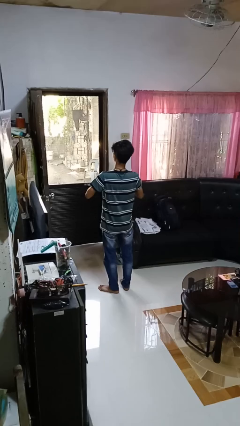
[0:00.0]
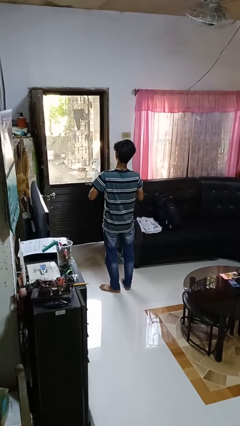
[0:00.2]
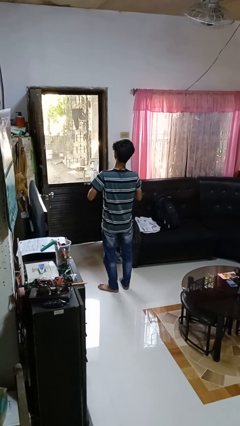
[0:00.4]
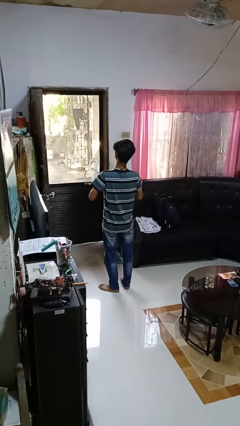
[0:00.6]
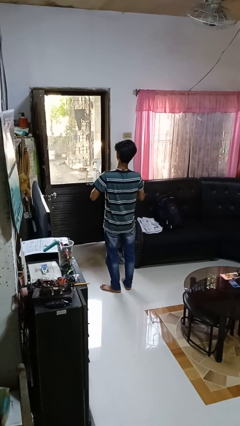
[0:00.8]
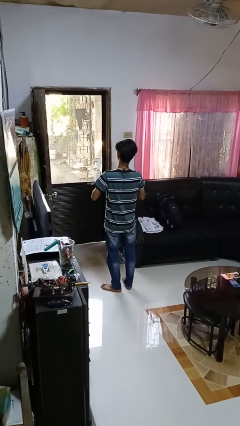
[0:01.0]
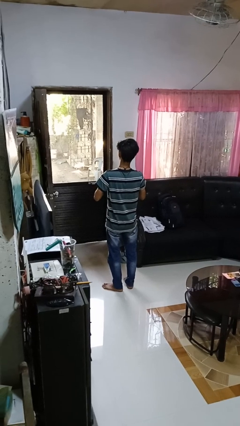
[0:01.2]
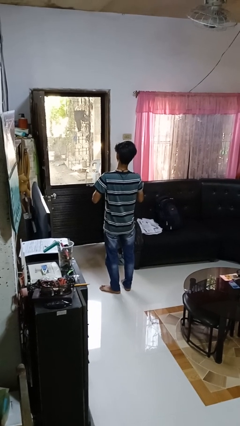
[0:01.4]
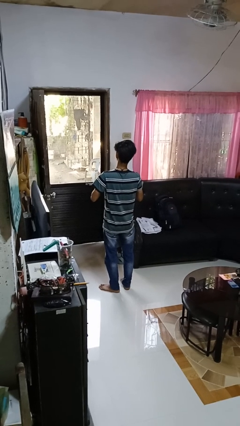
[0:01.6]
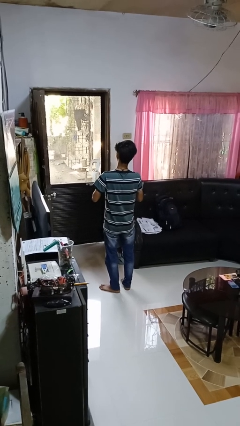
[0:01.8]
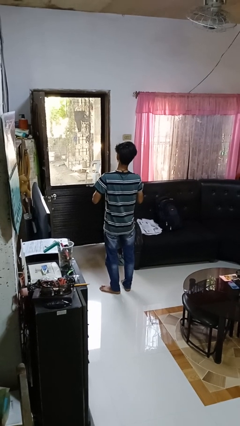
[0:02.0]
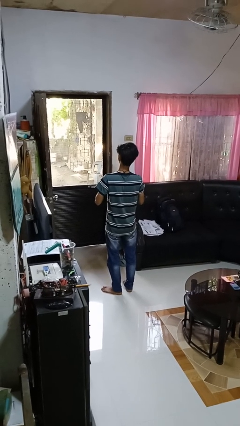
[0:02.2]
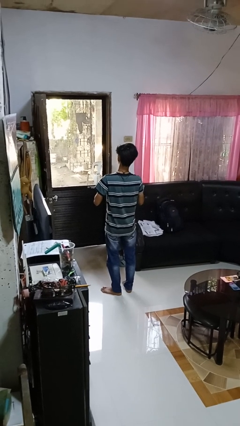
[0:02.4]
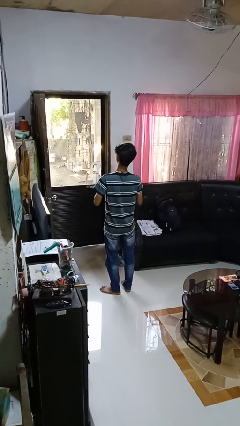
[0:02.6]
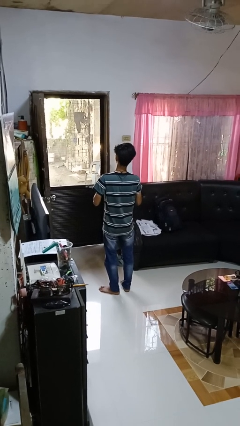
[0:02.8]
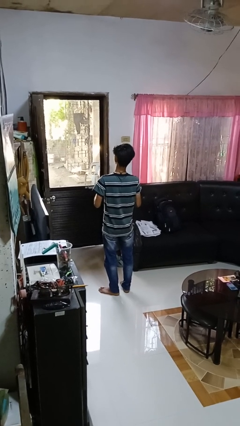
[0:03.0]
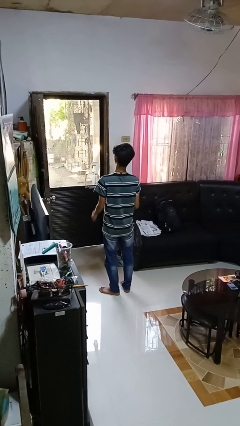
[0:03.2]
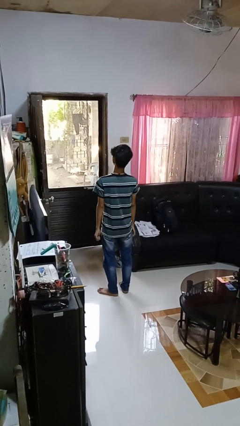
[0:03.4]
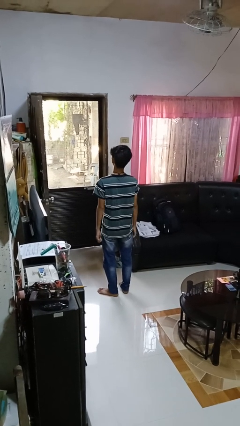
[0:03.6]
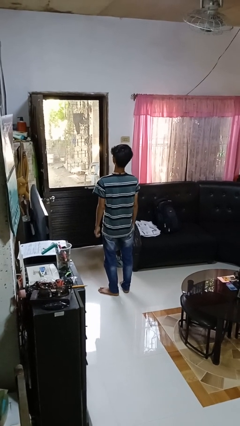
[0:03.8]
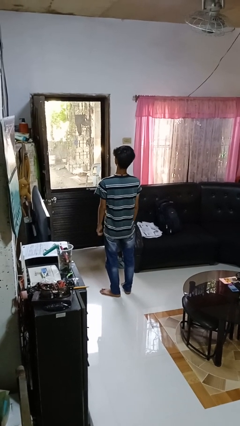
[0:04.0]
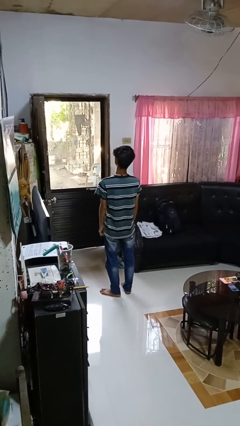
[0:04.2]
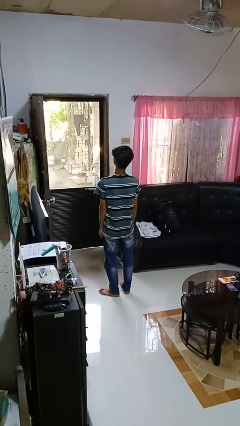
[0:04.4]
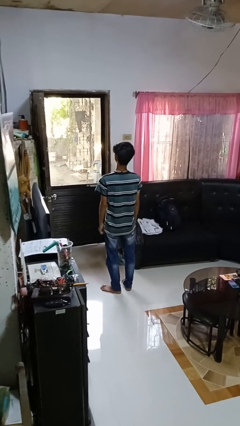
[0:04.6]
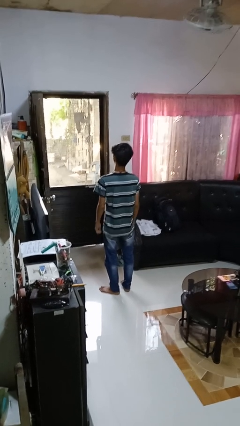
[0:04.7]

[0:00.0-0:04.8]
person unbuttons shirt

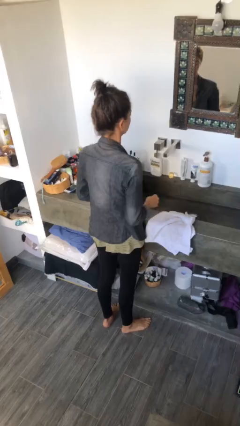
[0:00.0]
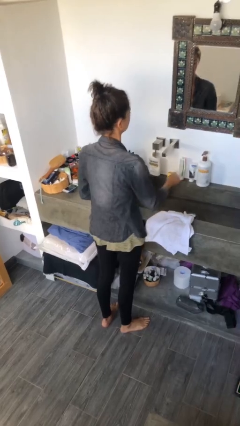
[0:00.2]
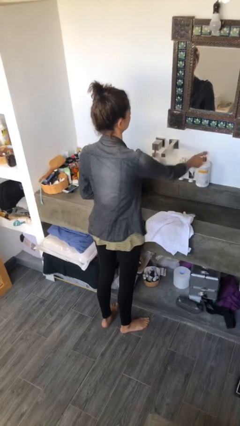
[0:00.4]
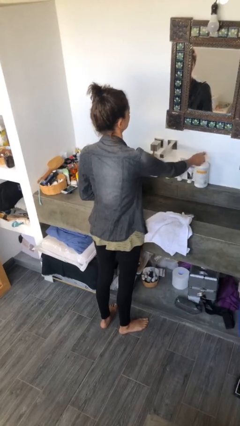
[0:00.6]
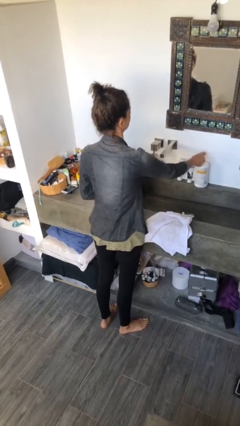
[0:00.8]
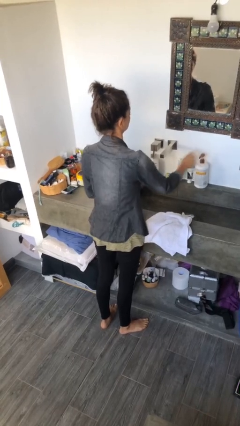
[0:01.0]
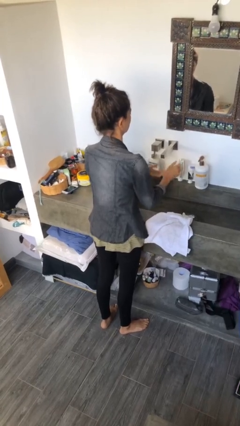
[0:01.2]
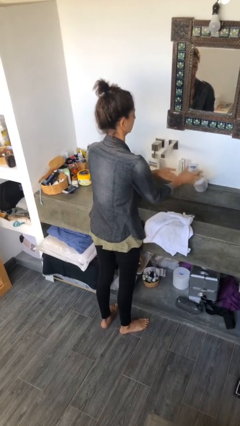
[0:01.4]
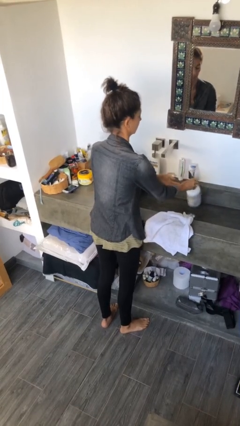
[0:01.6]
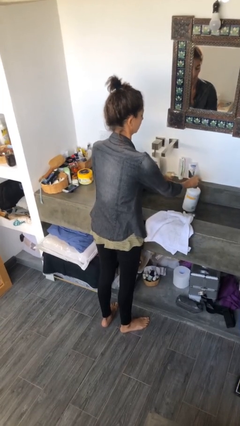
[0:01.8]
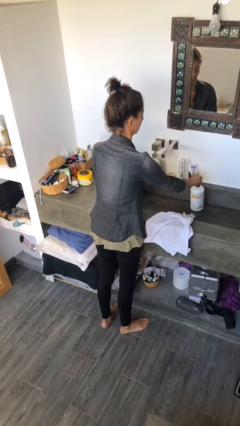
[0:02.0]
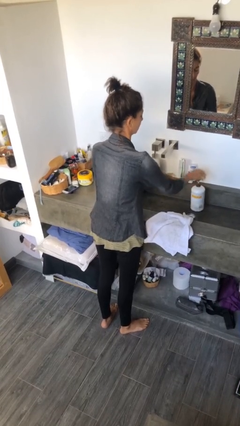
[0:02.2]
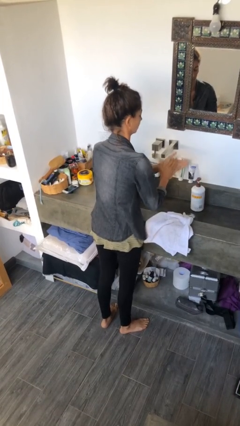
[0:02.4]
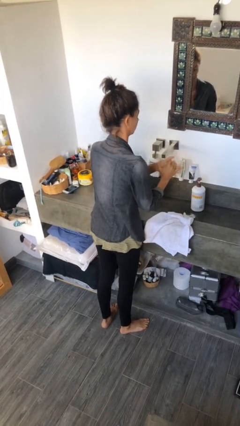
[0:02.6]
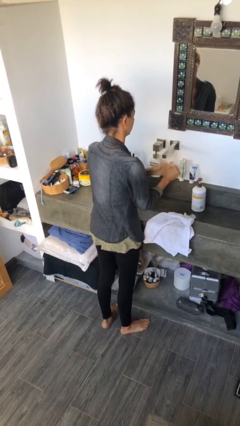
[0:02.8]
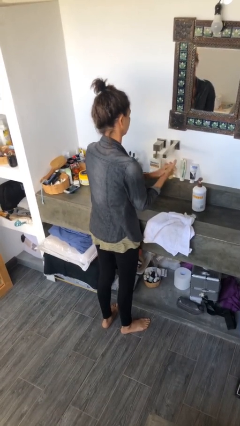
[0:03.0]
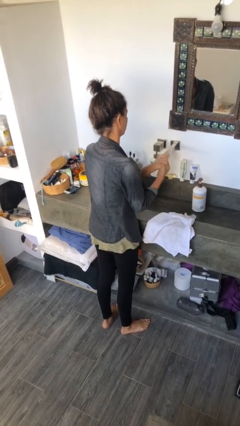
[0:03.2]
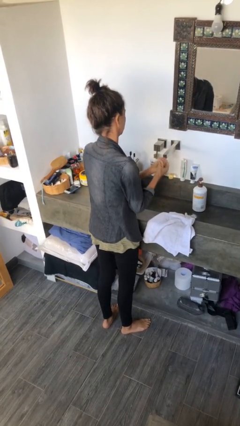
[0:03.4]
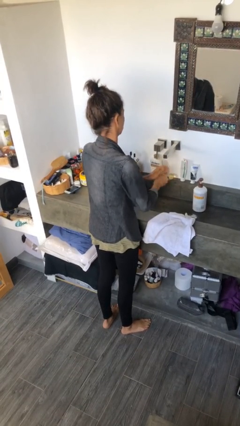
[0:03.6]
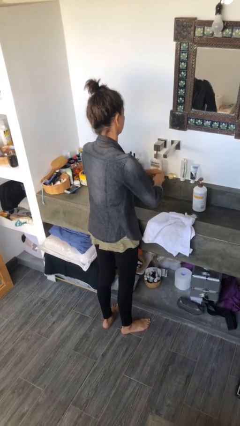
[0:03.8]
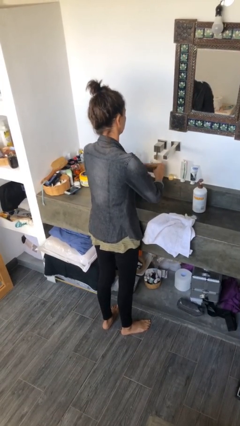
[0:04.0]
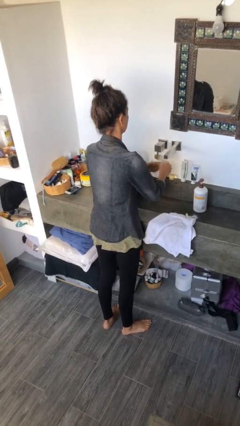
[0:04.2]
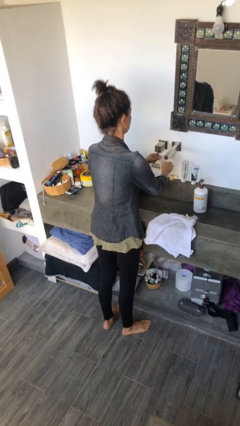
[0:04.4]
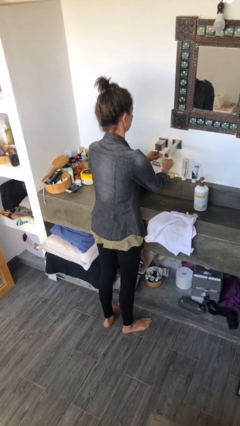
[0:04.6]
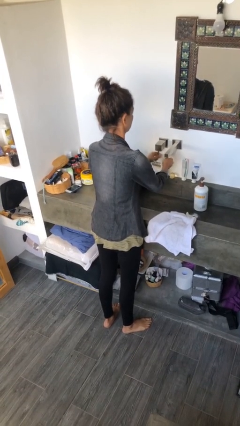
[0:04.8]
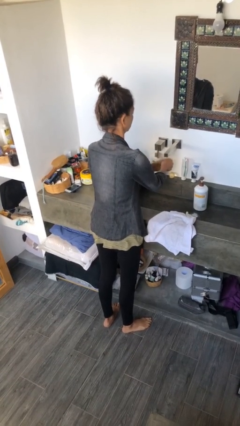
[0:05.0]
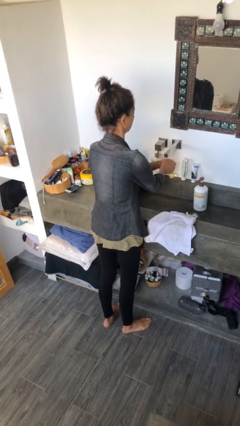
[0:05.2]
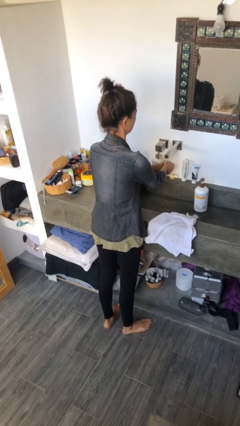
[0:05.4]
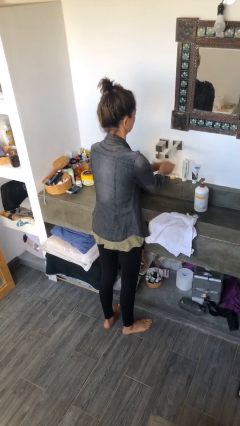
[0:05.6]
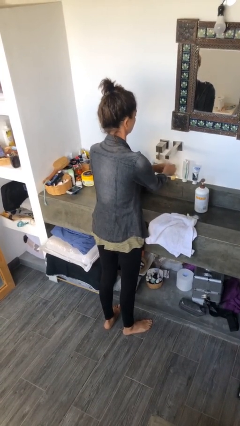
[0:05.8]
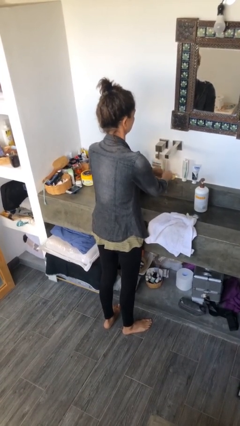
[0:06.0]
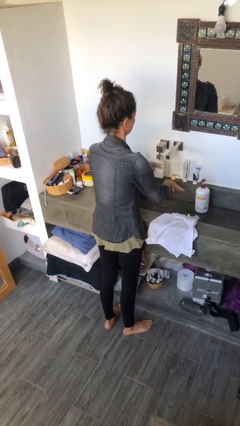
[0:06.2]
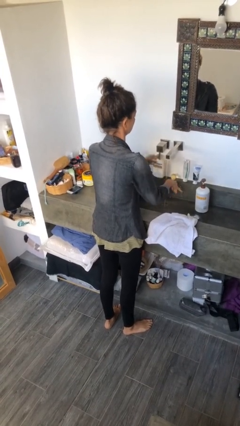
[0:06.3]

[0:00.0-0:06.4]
person washes hands

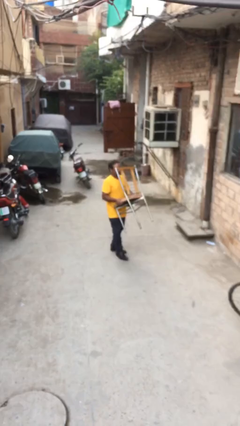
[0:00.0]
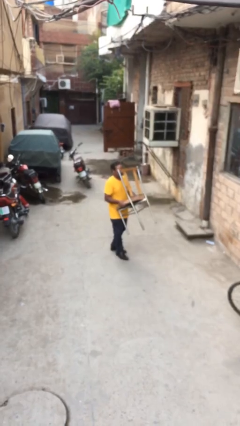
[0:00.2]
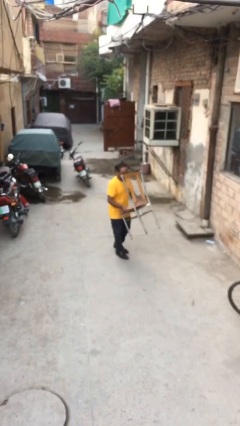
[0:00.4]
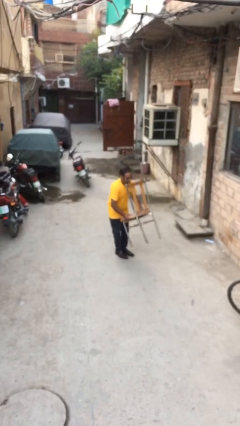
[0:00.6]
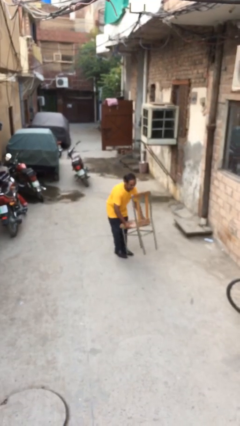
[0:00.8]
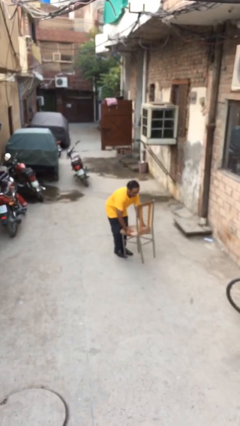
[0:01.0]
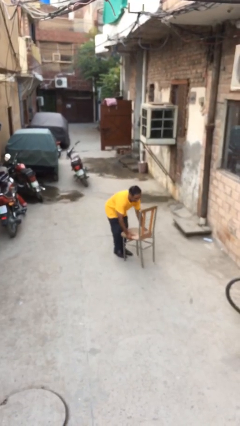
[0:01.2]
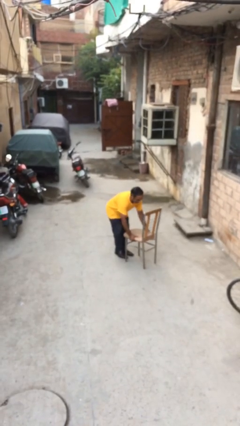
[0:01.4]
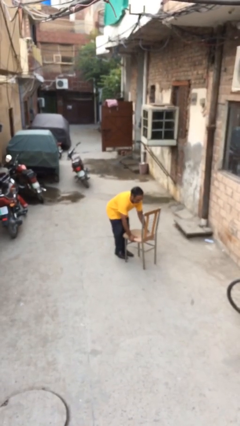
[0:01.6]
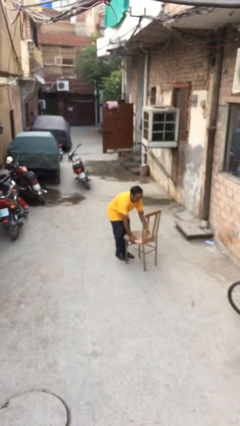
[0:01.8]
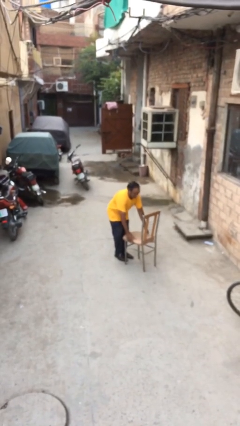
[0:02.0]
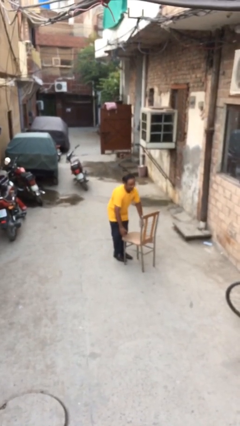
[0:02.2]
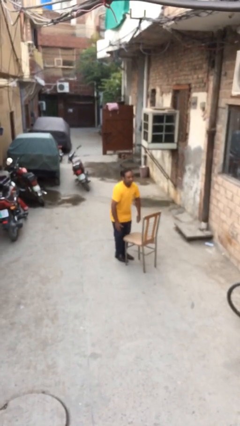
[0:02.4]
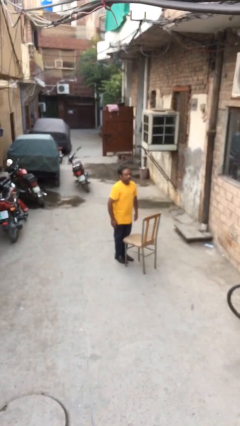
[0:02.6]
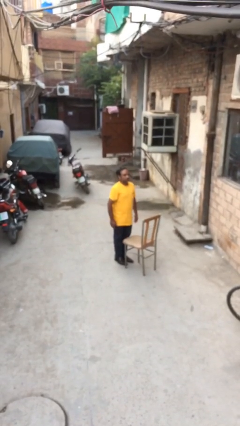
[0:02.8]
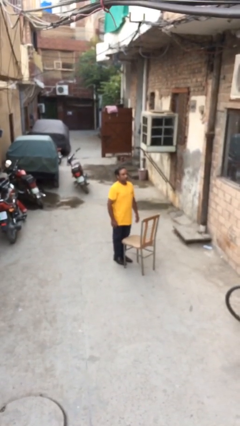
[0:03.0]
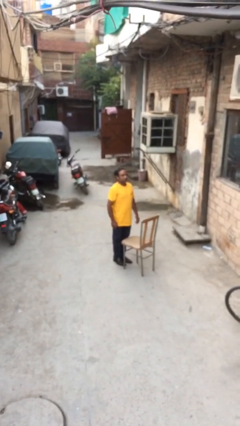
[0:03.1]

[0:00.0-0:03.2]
person puts down object on floor

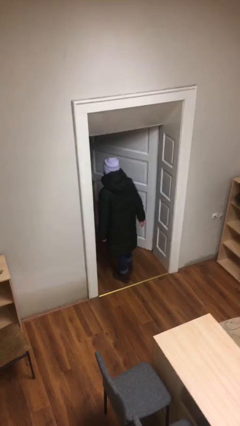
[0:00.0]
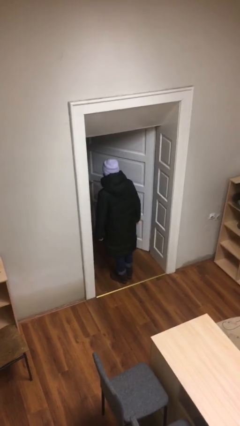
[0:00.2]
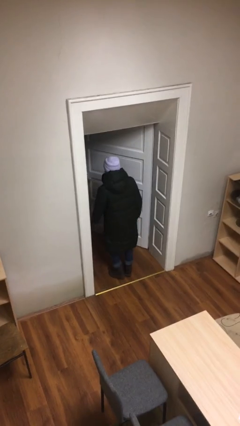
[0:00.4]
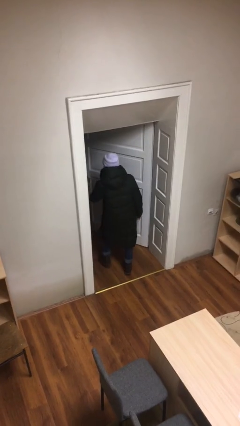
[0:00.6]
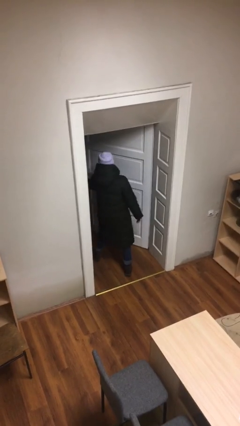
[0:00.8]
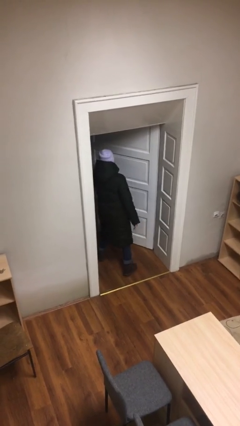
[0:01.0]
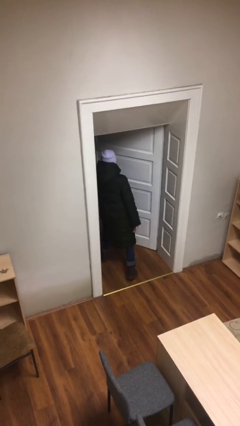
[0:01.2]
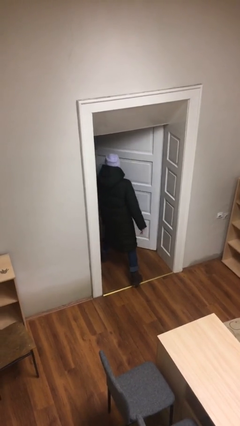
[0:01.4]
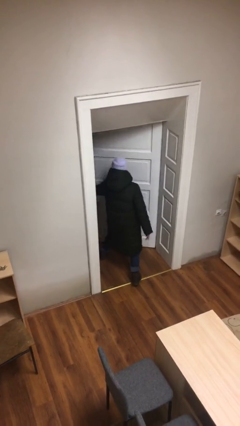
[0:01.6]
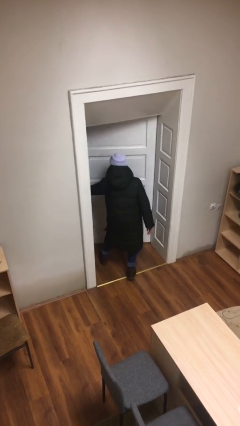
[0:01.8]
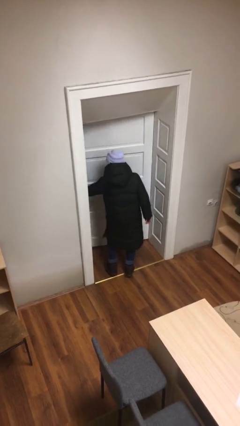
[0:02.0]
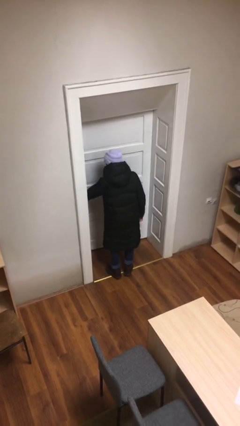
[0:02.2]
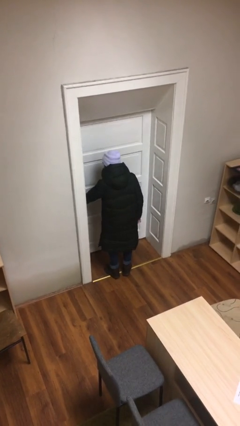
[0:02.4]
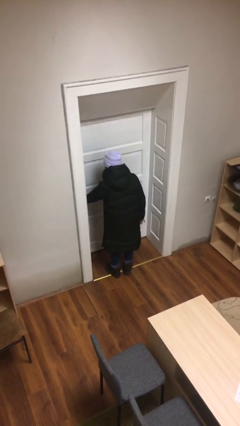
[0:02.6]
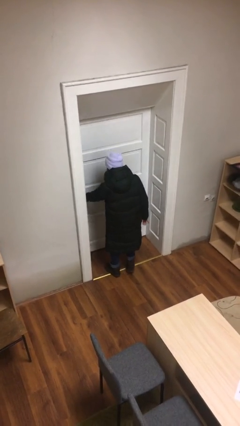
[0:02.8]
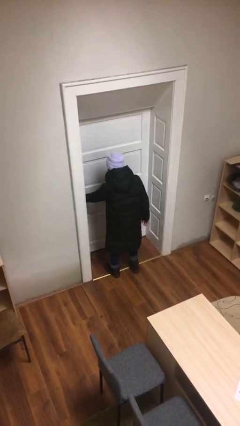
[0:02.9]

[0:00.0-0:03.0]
person closes facility door

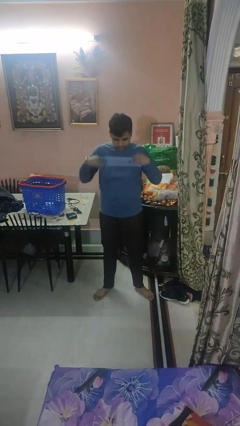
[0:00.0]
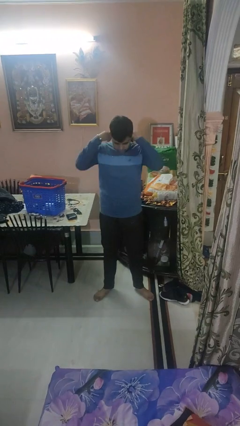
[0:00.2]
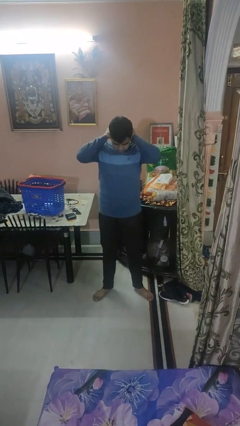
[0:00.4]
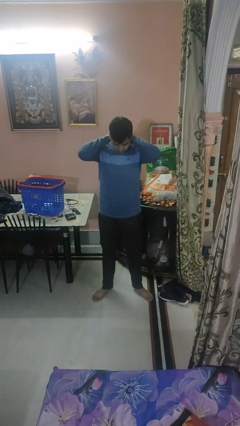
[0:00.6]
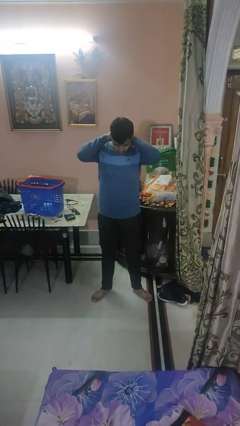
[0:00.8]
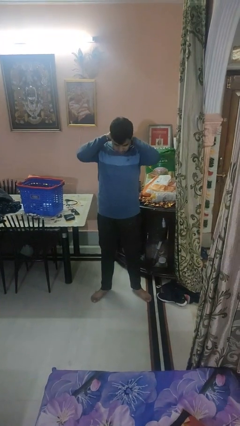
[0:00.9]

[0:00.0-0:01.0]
person puts on necklace
